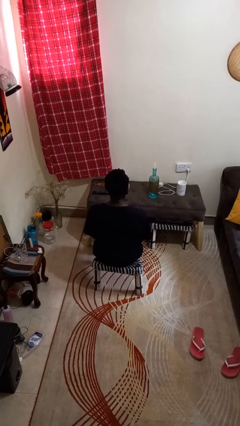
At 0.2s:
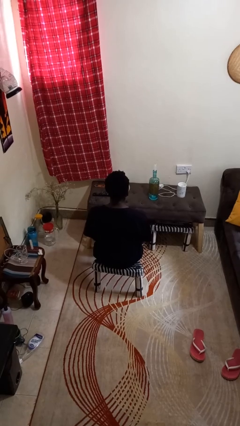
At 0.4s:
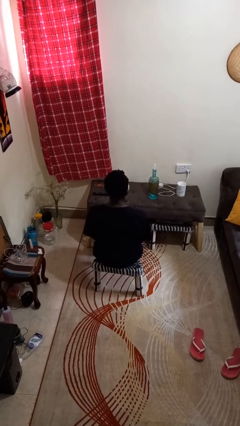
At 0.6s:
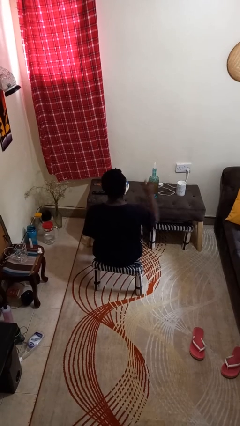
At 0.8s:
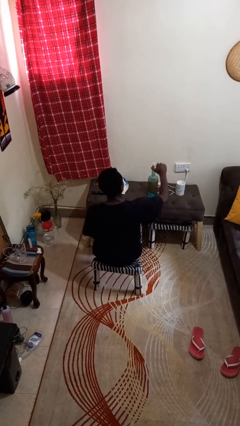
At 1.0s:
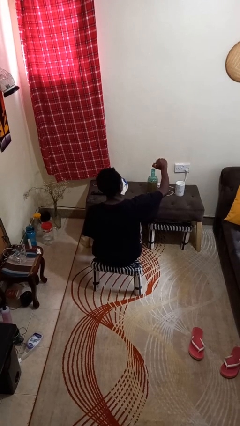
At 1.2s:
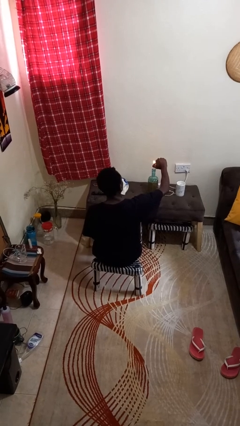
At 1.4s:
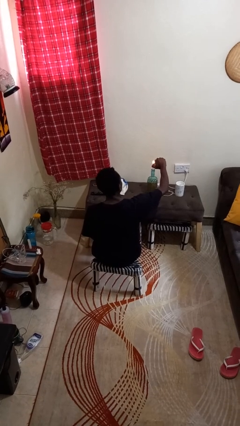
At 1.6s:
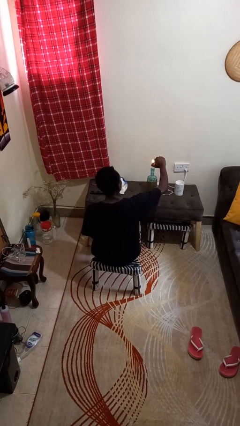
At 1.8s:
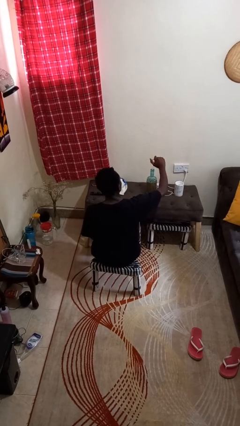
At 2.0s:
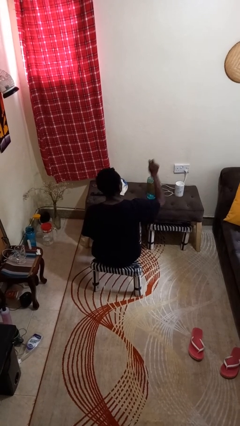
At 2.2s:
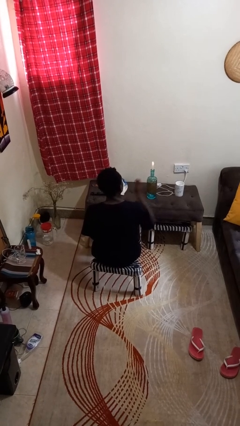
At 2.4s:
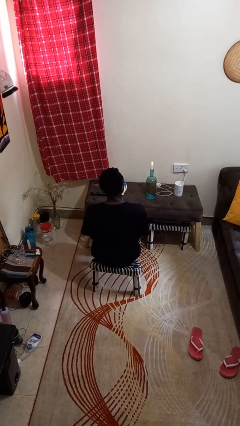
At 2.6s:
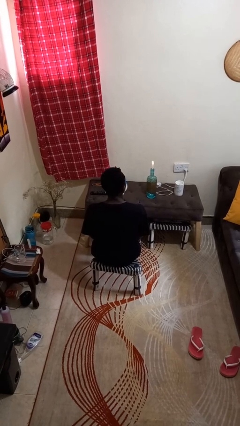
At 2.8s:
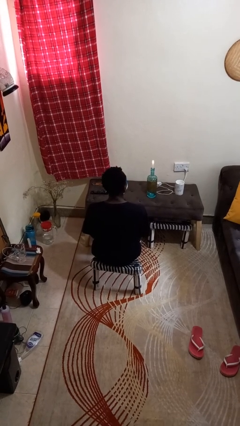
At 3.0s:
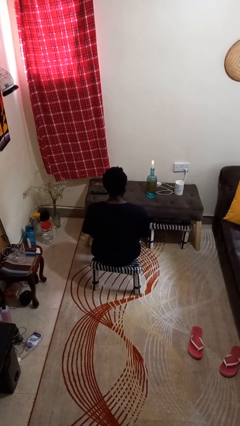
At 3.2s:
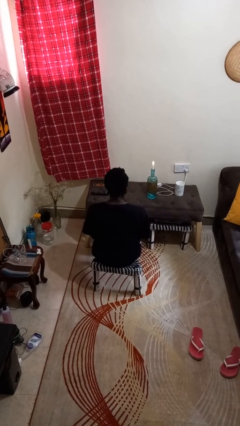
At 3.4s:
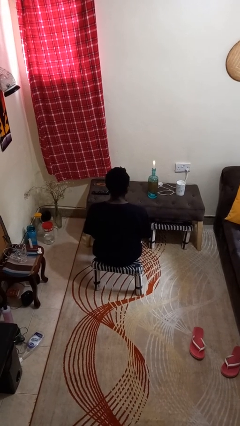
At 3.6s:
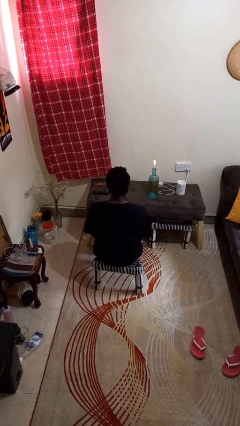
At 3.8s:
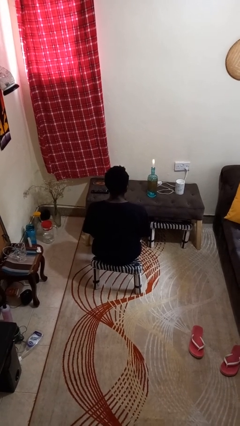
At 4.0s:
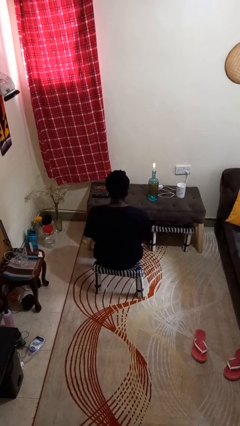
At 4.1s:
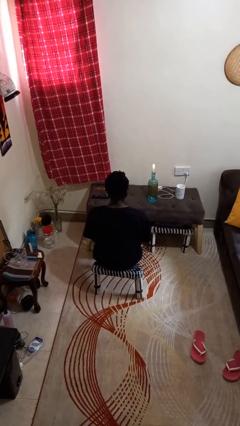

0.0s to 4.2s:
person lights candle

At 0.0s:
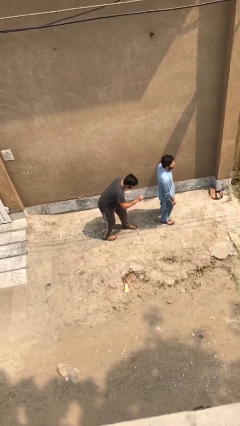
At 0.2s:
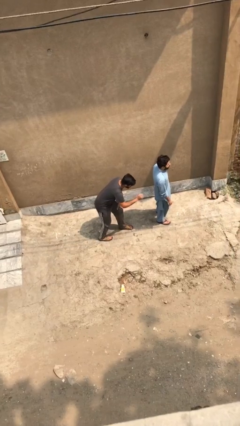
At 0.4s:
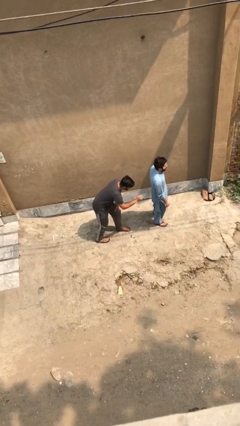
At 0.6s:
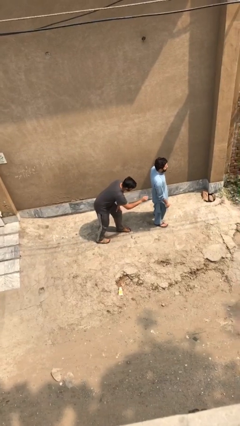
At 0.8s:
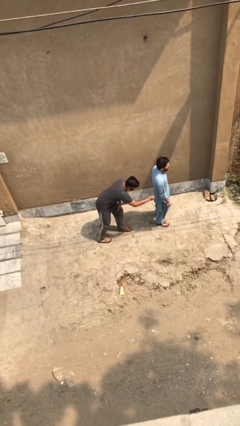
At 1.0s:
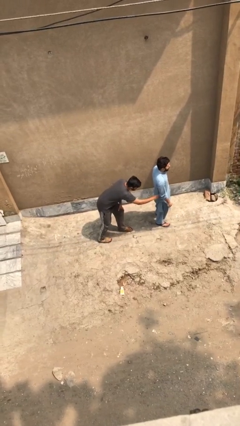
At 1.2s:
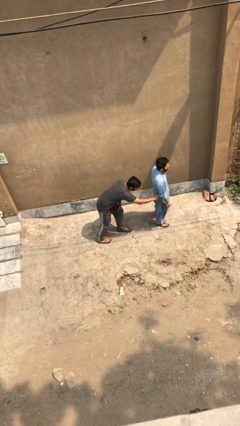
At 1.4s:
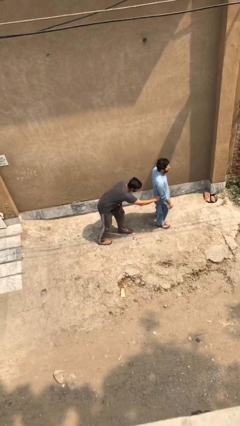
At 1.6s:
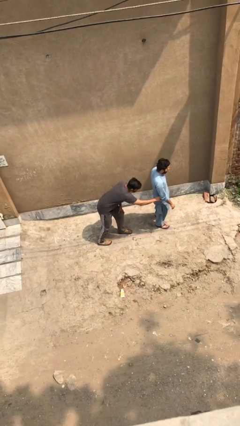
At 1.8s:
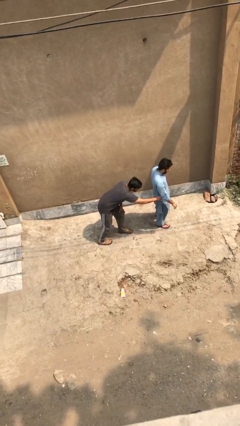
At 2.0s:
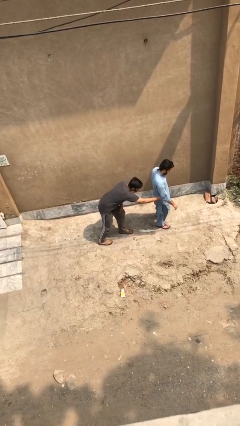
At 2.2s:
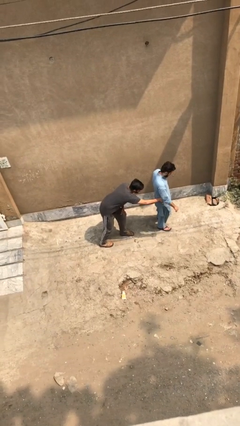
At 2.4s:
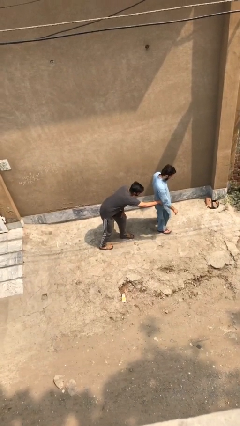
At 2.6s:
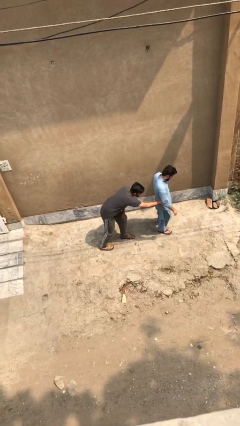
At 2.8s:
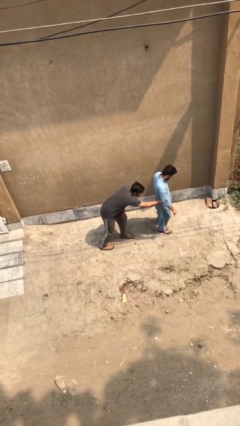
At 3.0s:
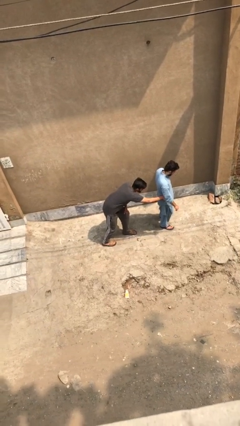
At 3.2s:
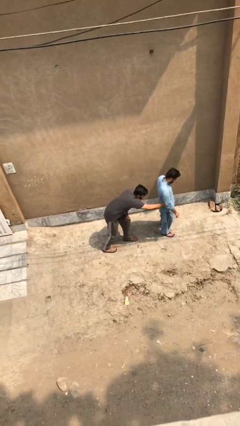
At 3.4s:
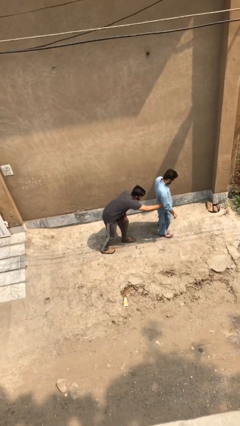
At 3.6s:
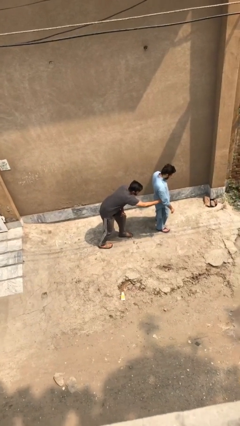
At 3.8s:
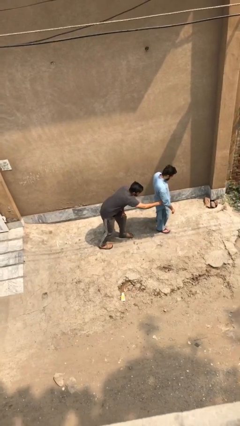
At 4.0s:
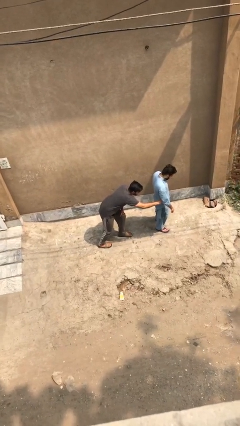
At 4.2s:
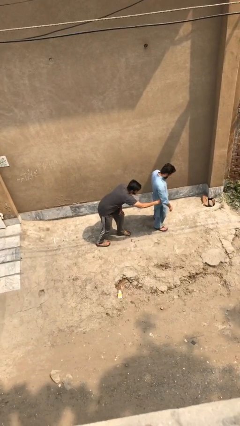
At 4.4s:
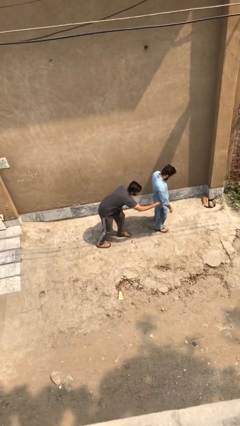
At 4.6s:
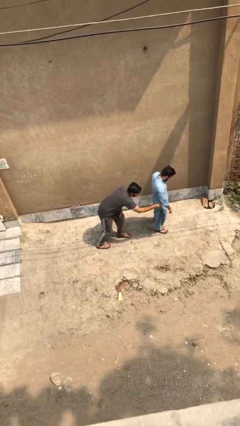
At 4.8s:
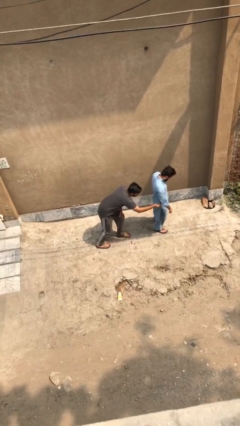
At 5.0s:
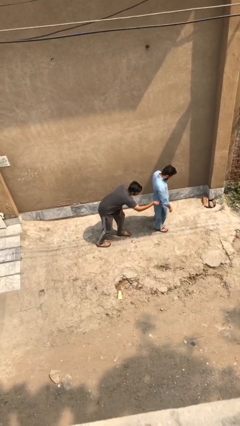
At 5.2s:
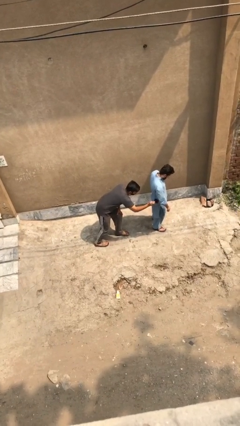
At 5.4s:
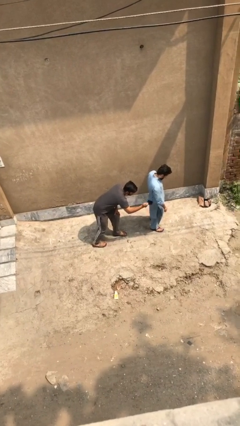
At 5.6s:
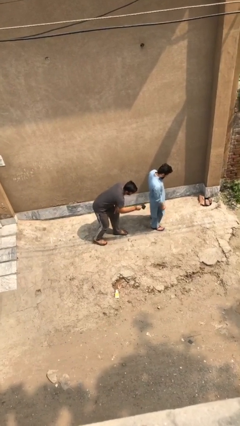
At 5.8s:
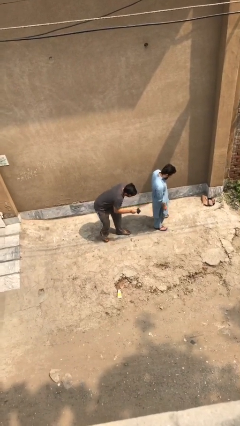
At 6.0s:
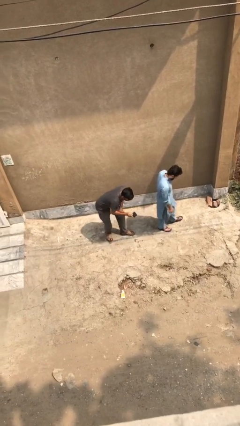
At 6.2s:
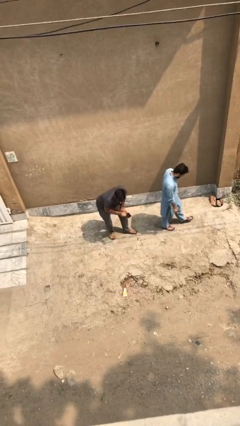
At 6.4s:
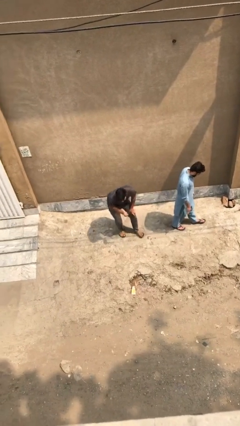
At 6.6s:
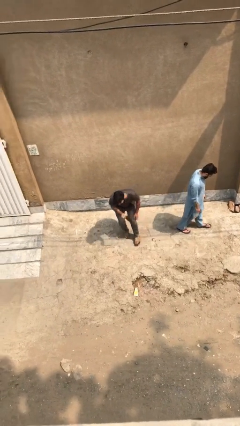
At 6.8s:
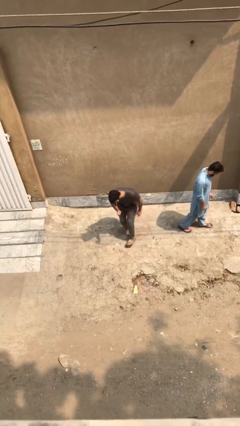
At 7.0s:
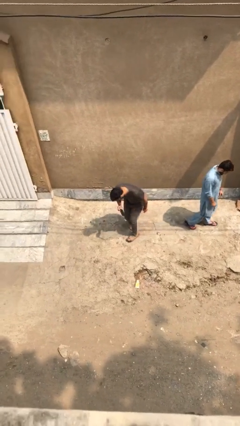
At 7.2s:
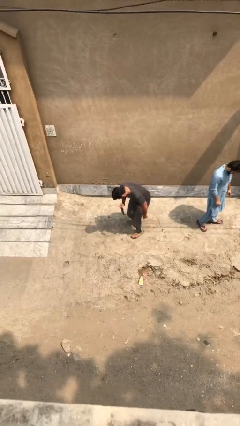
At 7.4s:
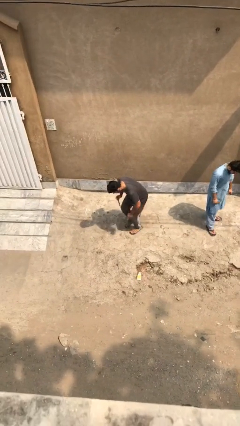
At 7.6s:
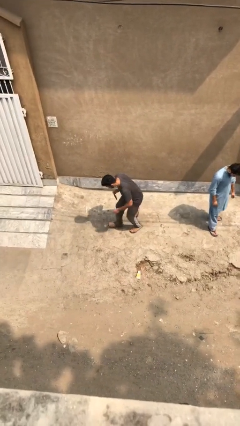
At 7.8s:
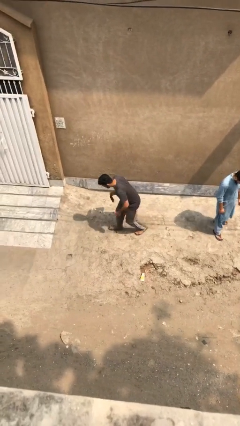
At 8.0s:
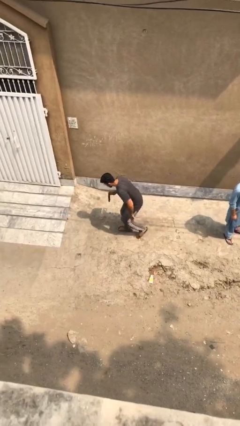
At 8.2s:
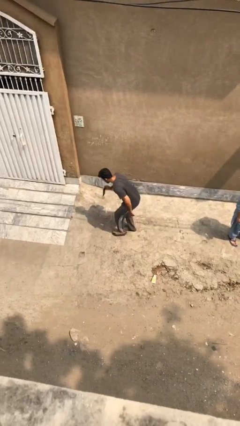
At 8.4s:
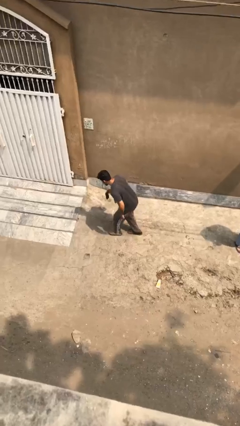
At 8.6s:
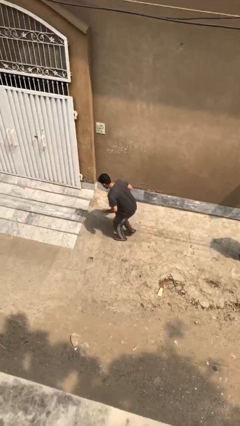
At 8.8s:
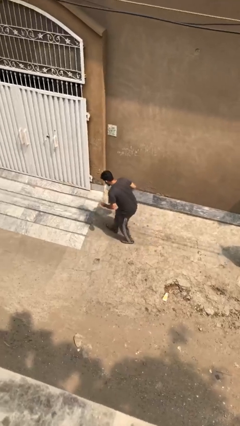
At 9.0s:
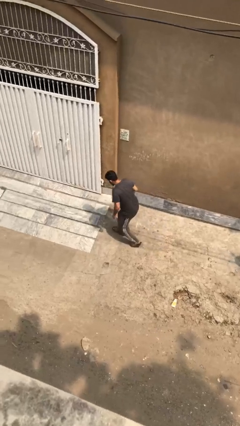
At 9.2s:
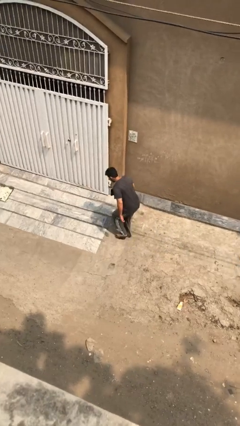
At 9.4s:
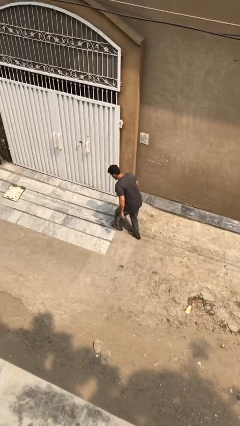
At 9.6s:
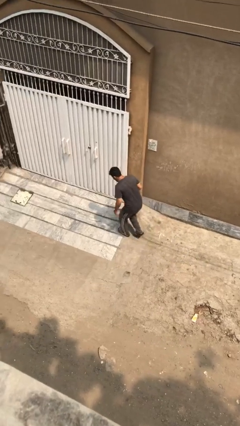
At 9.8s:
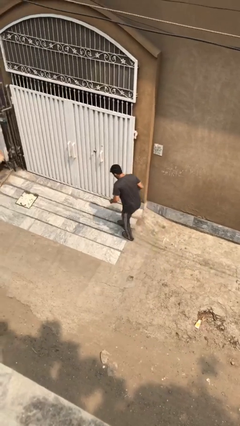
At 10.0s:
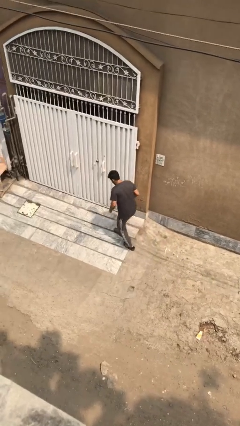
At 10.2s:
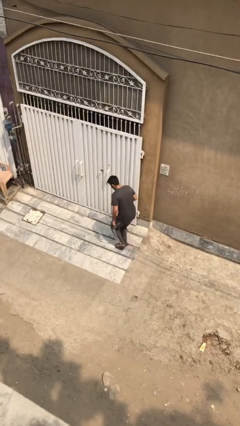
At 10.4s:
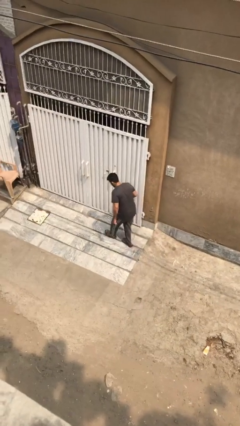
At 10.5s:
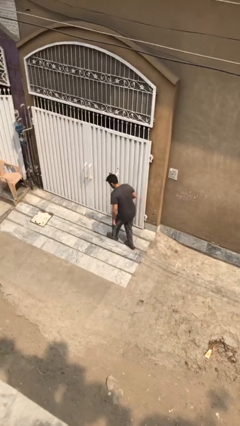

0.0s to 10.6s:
person steals object from person

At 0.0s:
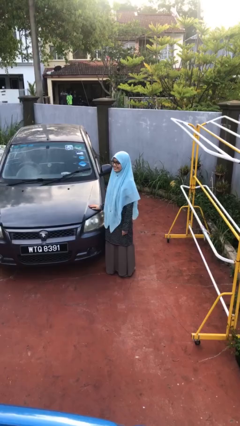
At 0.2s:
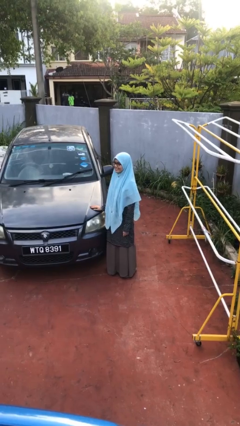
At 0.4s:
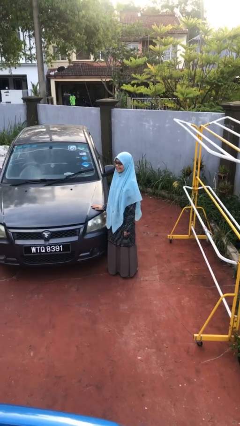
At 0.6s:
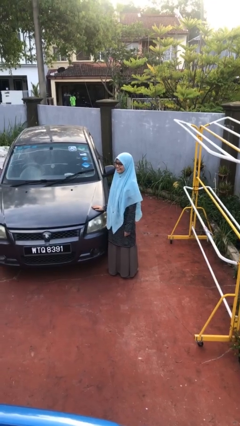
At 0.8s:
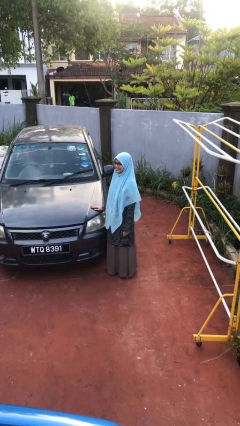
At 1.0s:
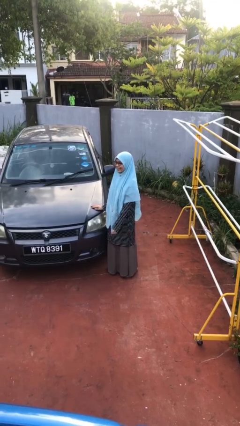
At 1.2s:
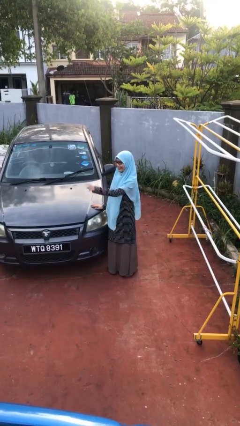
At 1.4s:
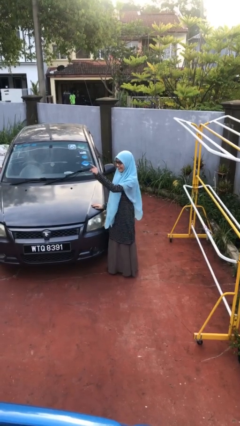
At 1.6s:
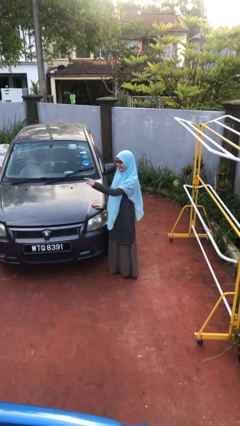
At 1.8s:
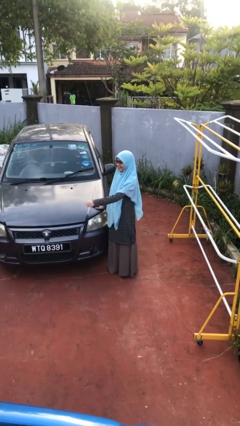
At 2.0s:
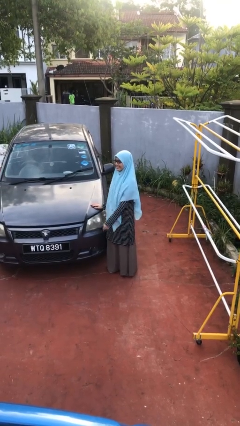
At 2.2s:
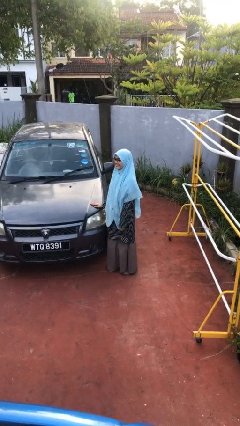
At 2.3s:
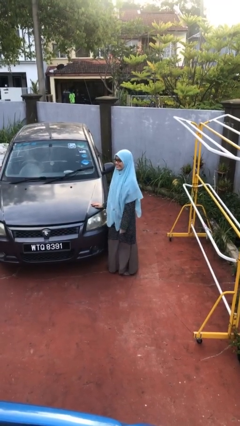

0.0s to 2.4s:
person points at person

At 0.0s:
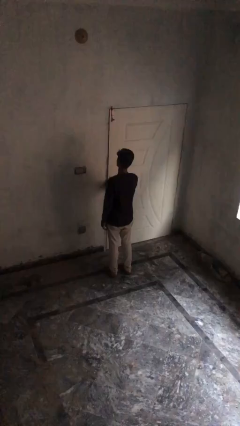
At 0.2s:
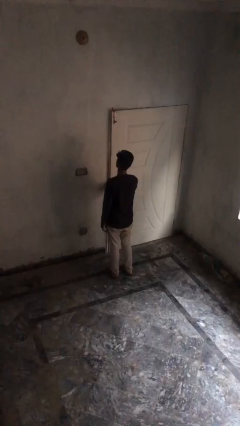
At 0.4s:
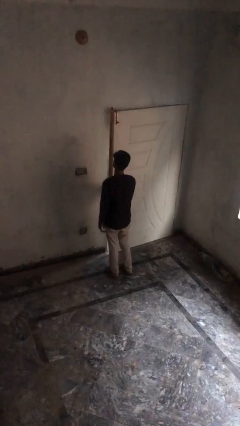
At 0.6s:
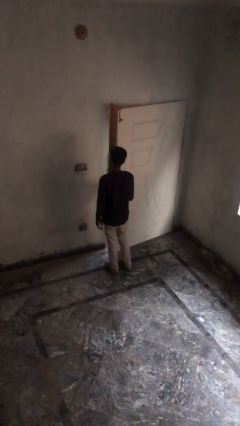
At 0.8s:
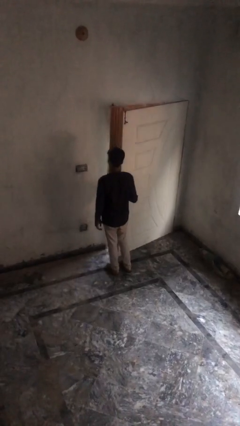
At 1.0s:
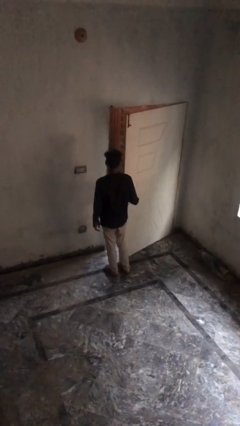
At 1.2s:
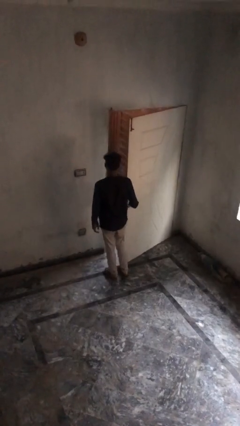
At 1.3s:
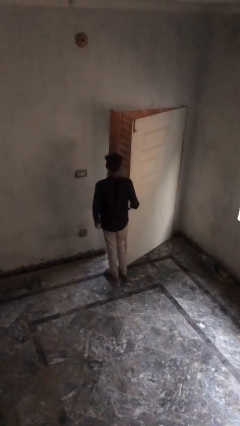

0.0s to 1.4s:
person opens facility door
